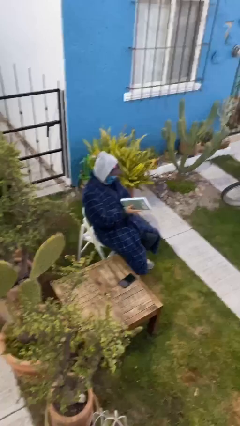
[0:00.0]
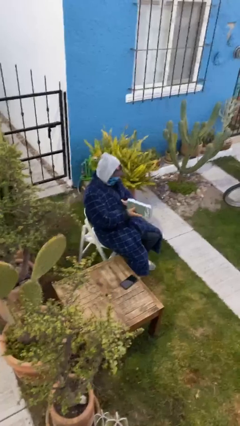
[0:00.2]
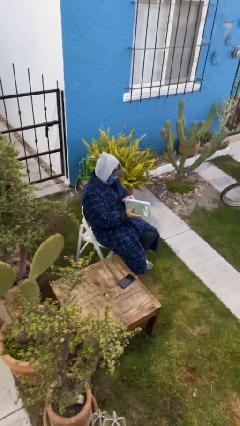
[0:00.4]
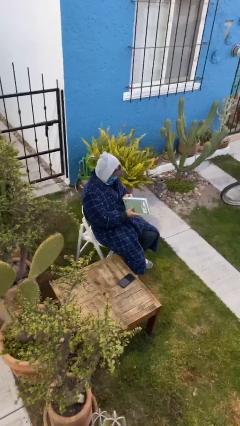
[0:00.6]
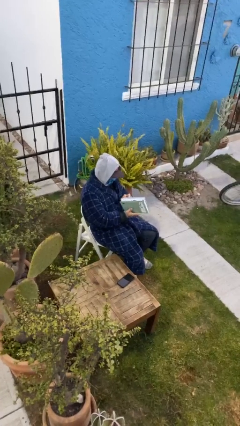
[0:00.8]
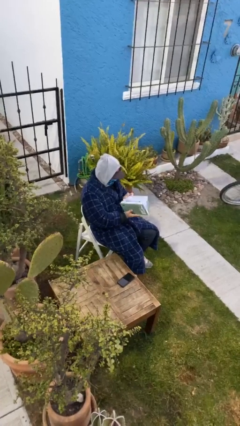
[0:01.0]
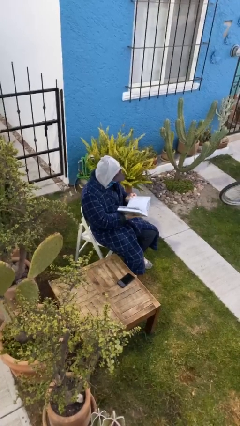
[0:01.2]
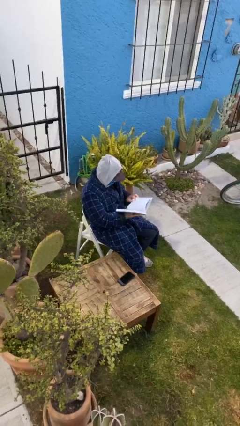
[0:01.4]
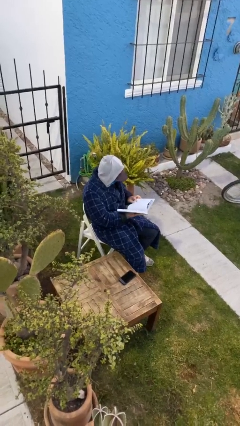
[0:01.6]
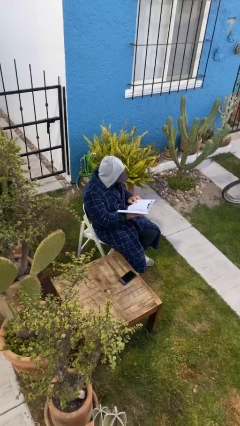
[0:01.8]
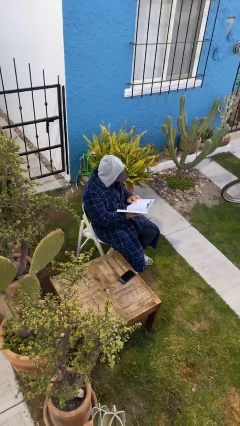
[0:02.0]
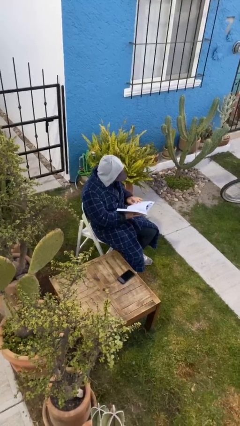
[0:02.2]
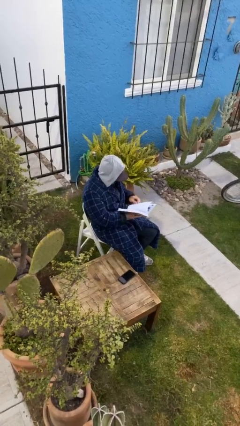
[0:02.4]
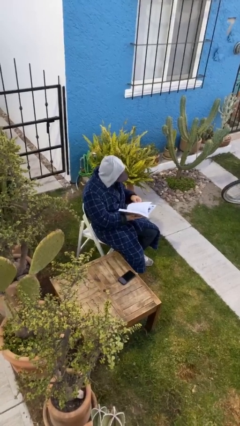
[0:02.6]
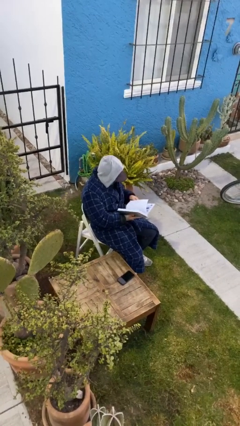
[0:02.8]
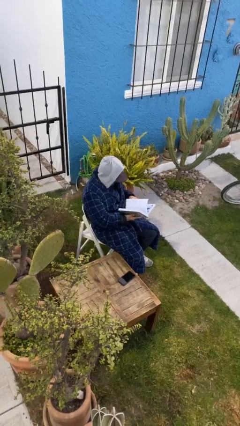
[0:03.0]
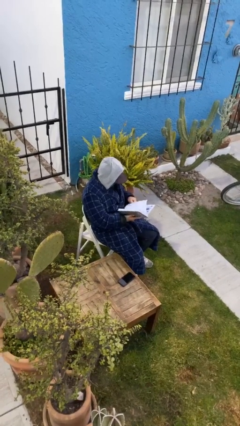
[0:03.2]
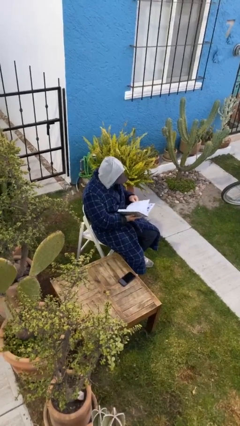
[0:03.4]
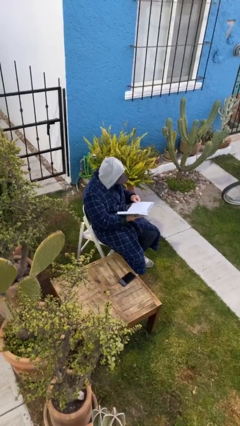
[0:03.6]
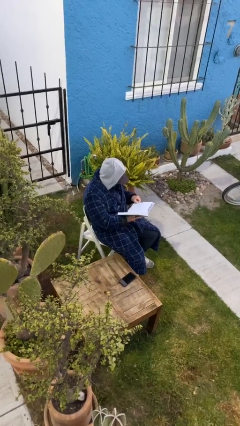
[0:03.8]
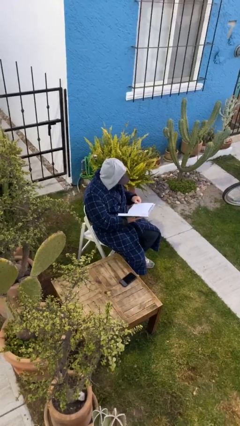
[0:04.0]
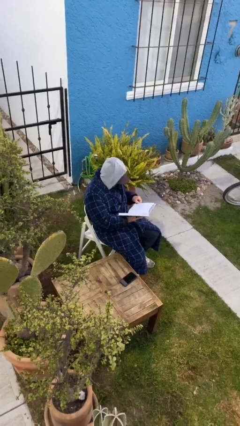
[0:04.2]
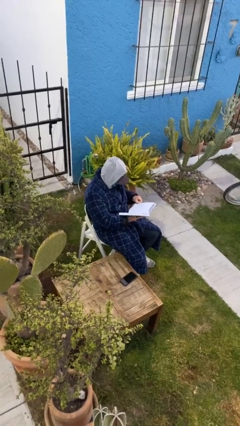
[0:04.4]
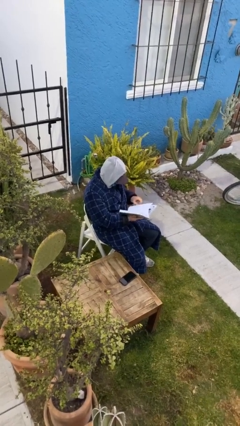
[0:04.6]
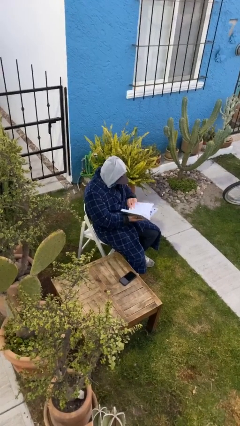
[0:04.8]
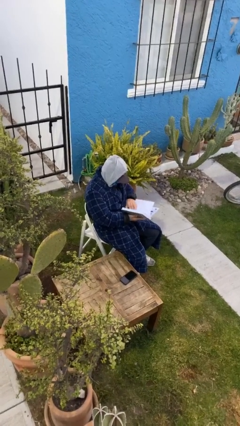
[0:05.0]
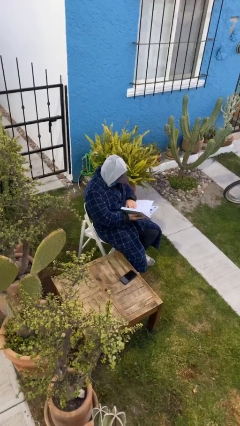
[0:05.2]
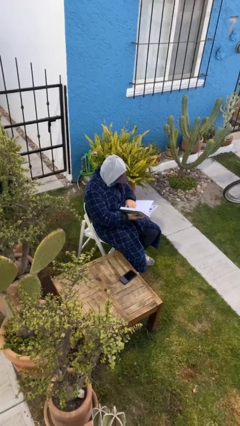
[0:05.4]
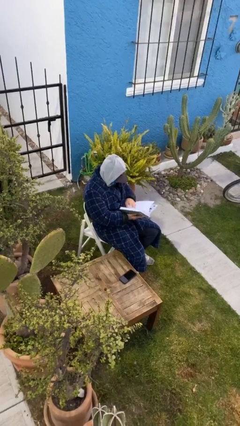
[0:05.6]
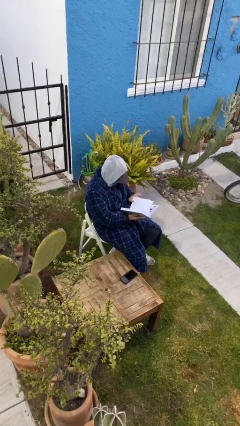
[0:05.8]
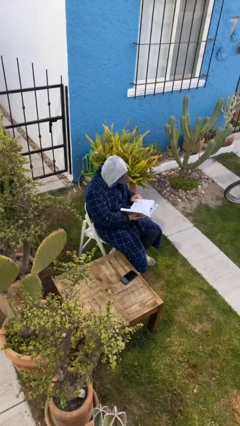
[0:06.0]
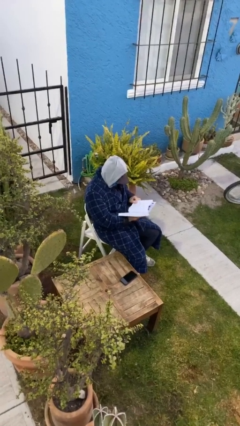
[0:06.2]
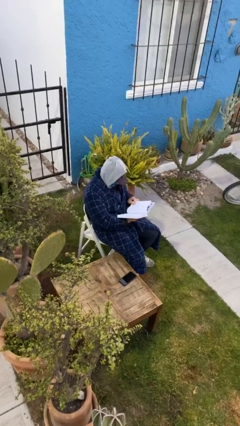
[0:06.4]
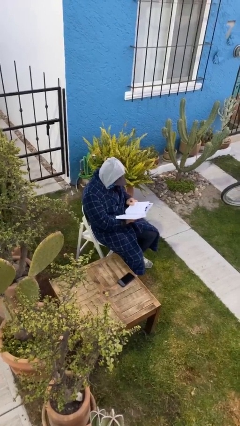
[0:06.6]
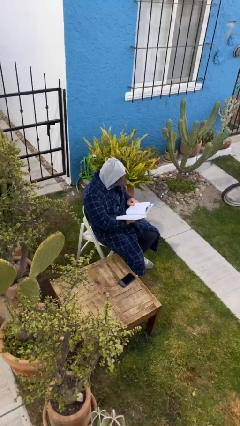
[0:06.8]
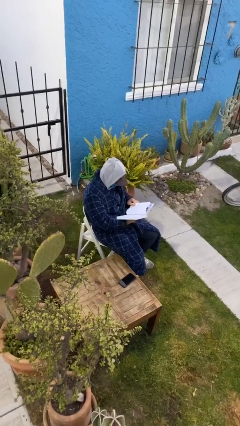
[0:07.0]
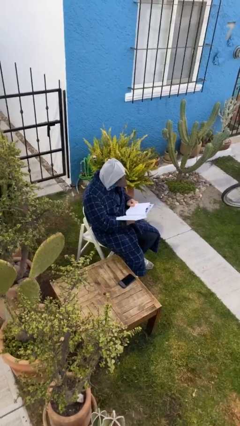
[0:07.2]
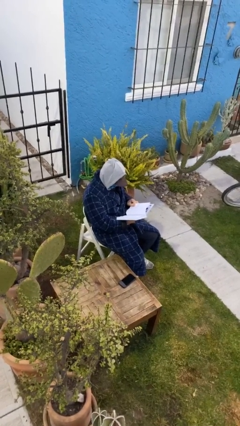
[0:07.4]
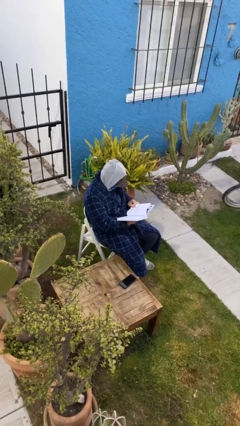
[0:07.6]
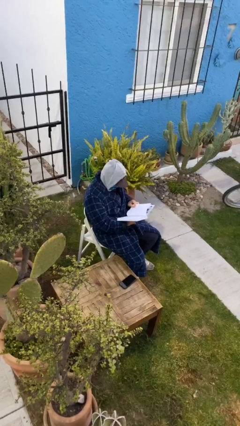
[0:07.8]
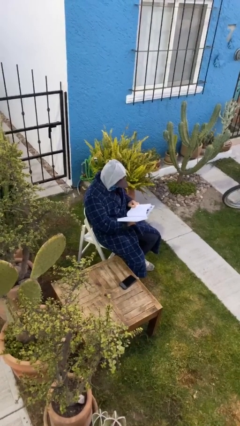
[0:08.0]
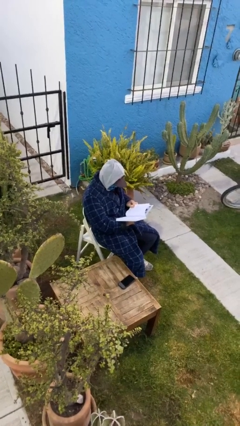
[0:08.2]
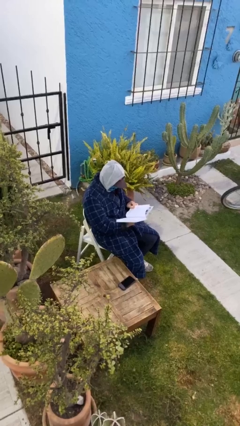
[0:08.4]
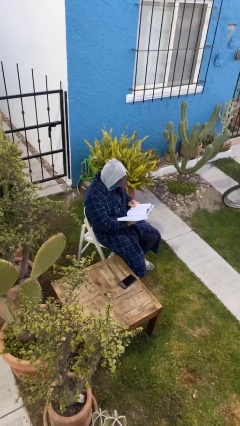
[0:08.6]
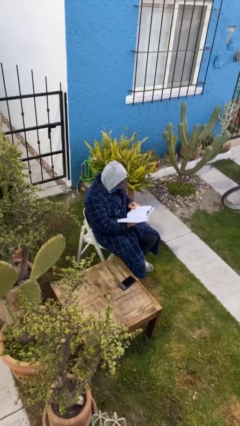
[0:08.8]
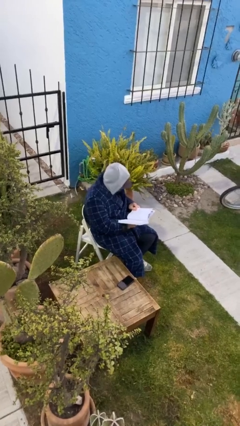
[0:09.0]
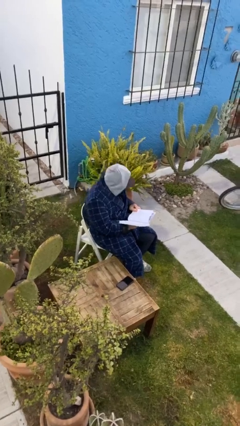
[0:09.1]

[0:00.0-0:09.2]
person reads document

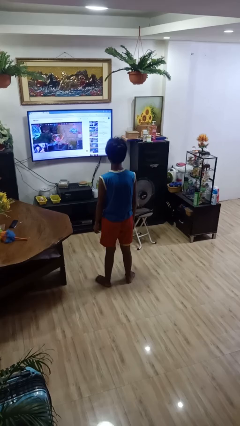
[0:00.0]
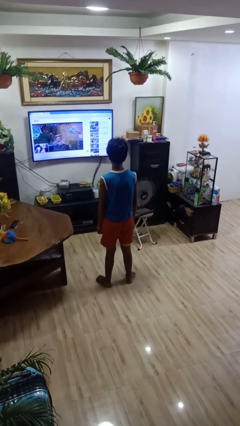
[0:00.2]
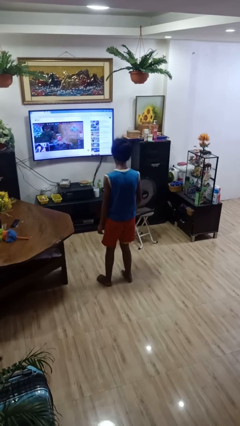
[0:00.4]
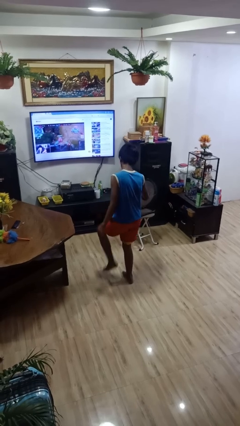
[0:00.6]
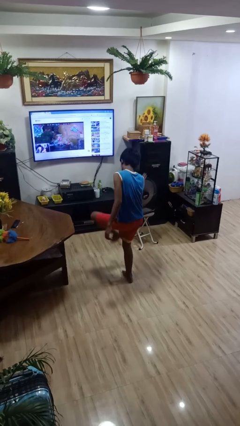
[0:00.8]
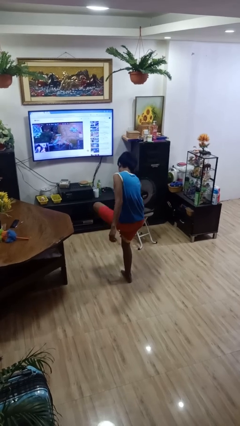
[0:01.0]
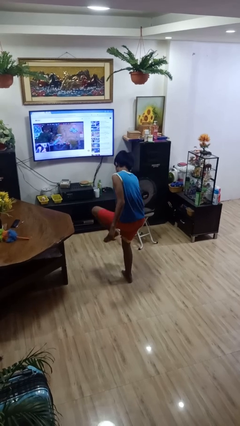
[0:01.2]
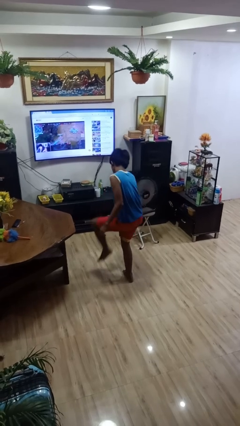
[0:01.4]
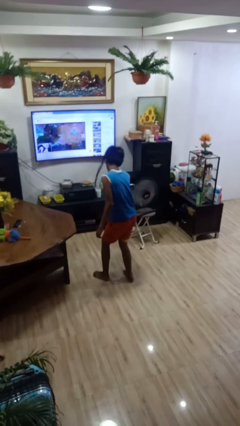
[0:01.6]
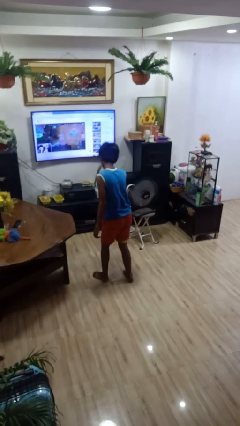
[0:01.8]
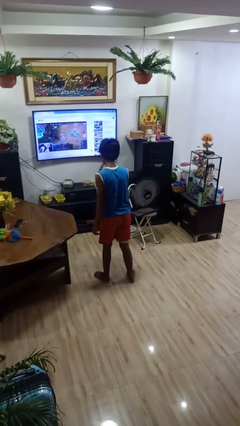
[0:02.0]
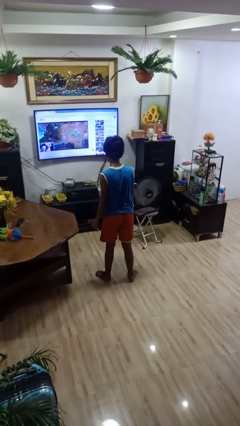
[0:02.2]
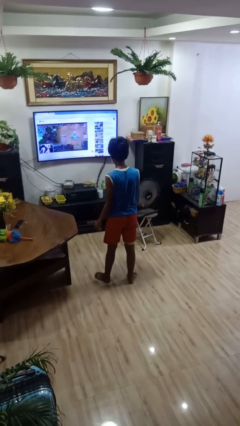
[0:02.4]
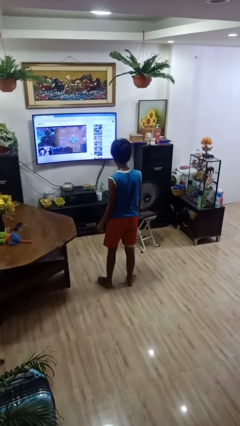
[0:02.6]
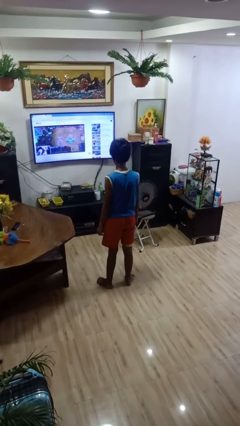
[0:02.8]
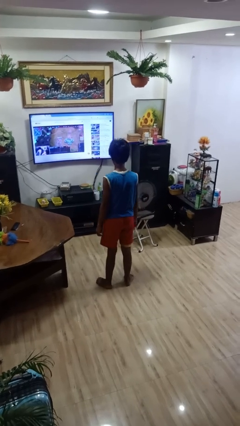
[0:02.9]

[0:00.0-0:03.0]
person swats bug

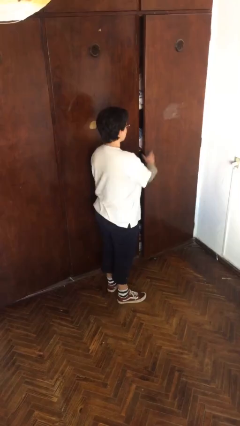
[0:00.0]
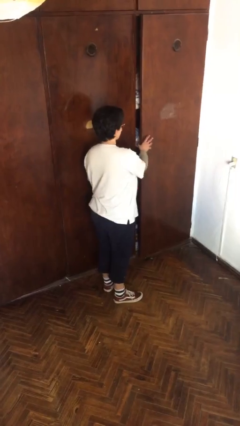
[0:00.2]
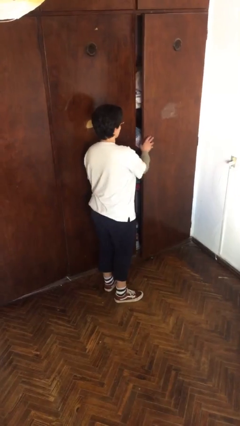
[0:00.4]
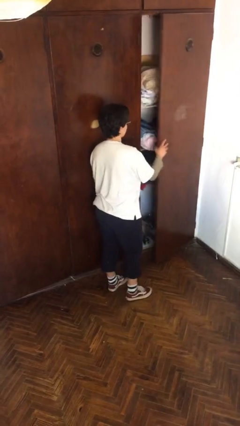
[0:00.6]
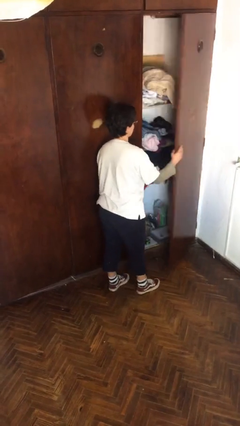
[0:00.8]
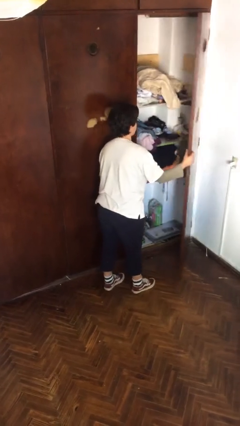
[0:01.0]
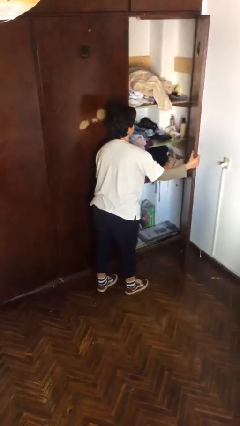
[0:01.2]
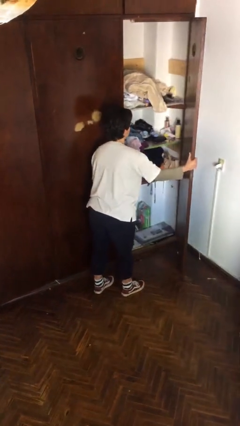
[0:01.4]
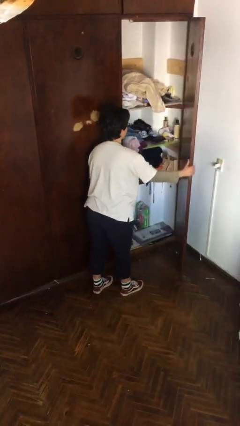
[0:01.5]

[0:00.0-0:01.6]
person opens closet door

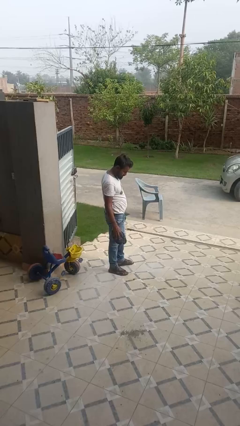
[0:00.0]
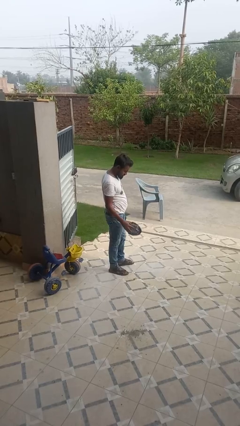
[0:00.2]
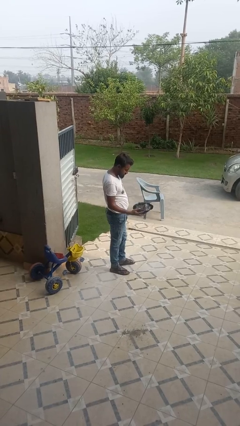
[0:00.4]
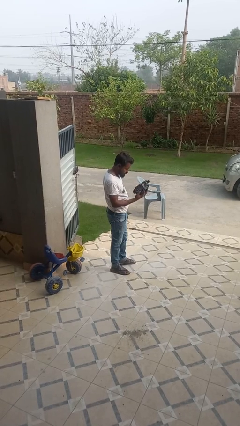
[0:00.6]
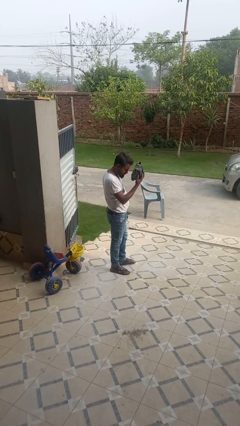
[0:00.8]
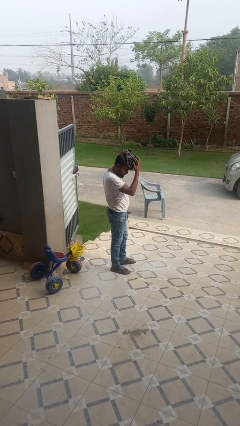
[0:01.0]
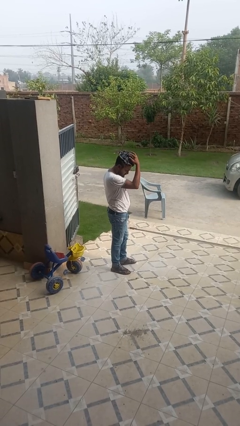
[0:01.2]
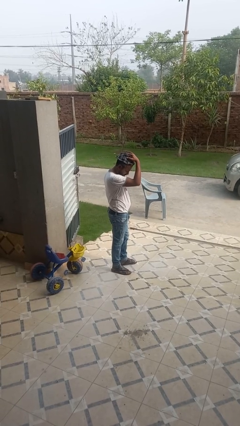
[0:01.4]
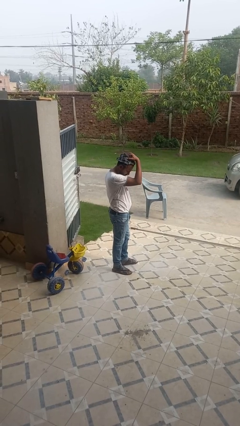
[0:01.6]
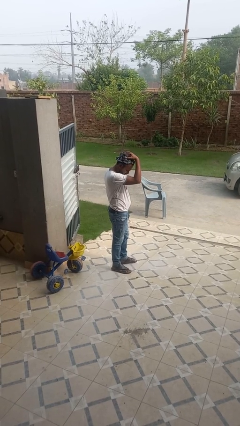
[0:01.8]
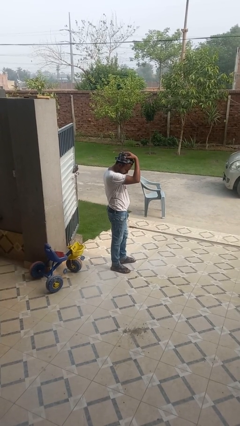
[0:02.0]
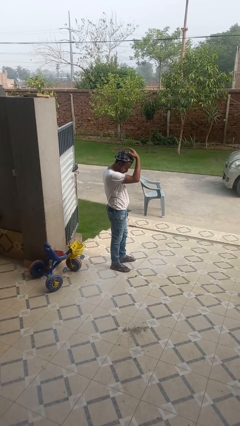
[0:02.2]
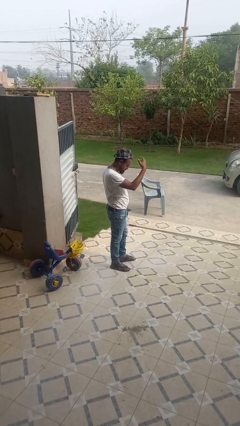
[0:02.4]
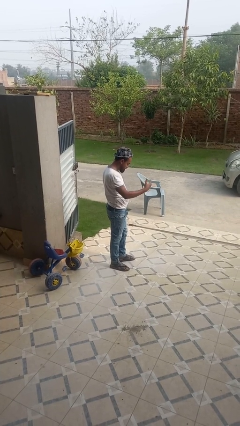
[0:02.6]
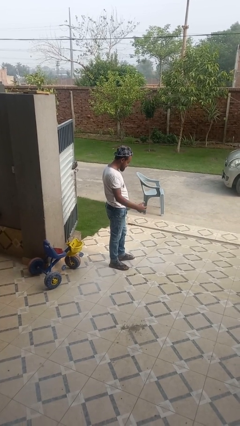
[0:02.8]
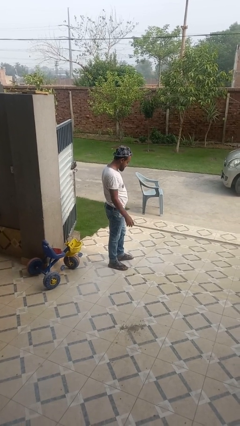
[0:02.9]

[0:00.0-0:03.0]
person puts on hat

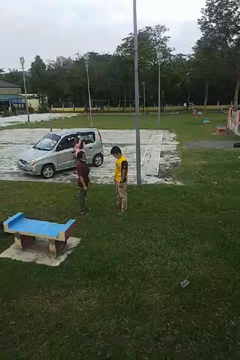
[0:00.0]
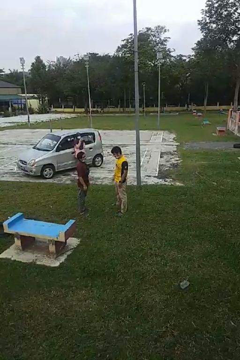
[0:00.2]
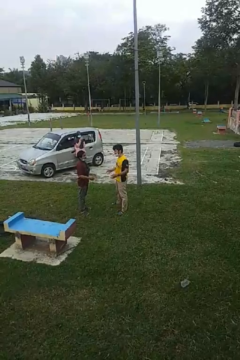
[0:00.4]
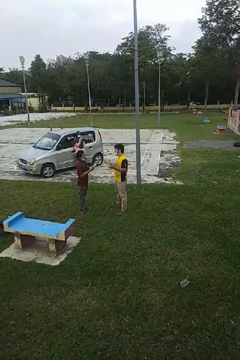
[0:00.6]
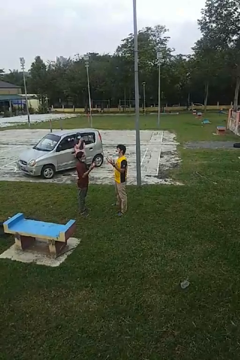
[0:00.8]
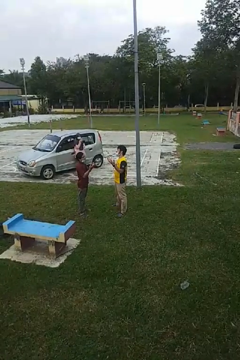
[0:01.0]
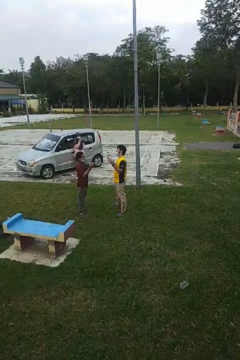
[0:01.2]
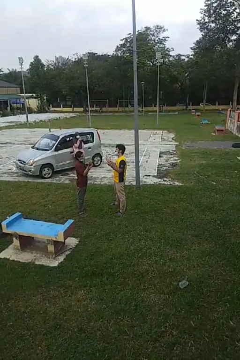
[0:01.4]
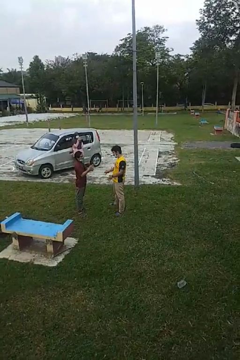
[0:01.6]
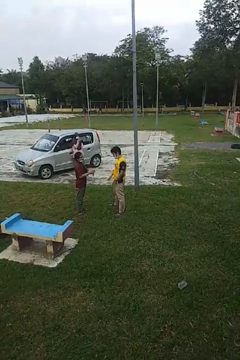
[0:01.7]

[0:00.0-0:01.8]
person talks to person
